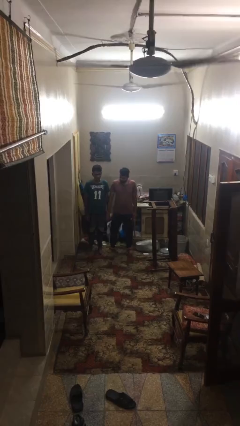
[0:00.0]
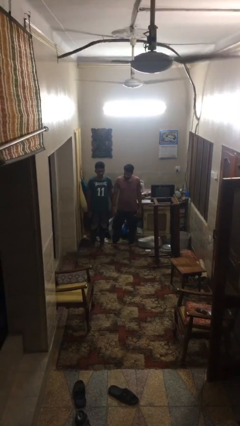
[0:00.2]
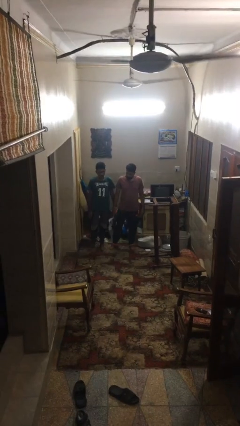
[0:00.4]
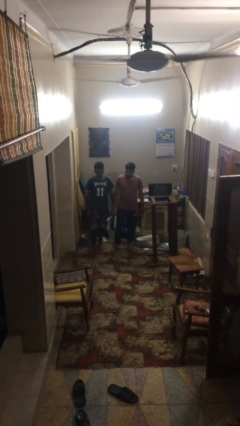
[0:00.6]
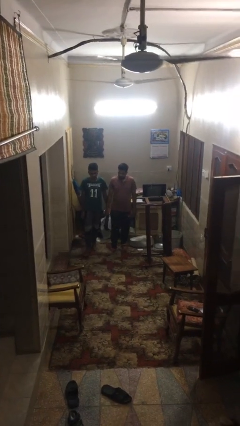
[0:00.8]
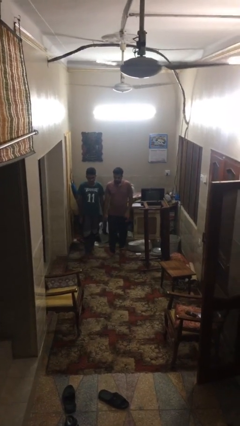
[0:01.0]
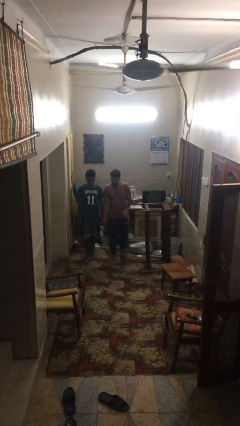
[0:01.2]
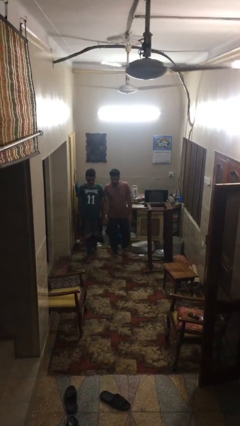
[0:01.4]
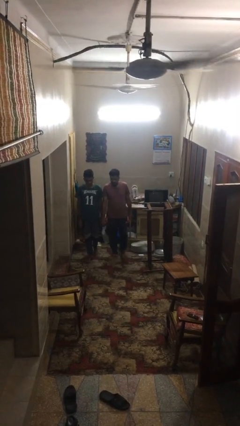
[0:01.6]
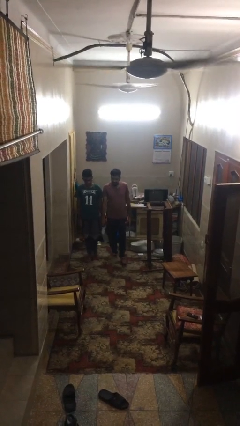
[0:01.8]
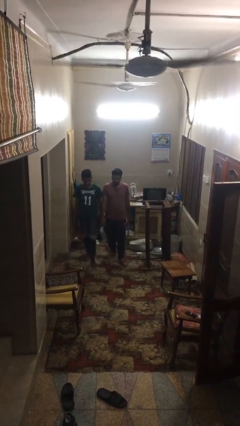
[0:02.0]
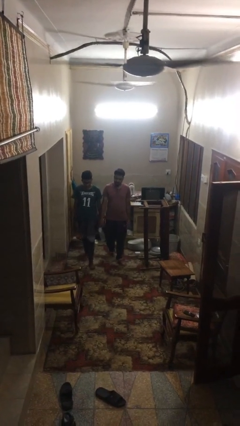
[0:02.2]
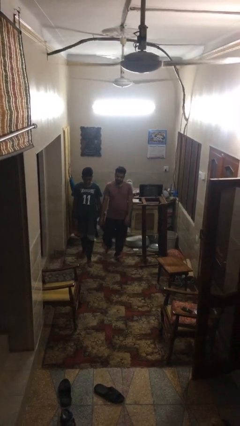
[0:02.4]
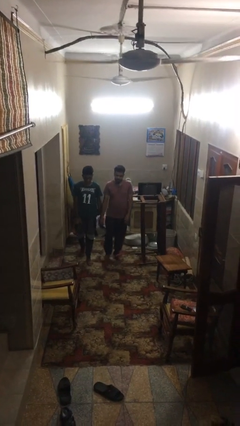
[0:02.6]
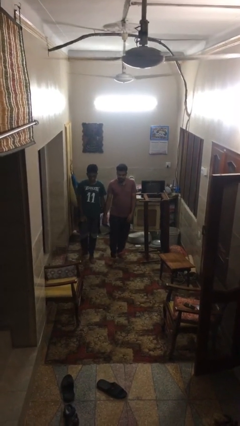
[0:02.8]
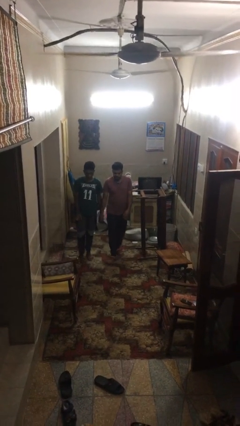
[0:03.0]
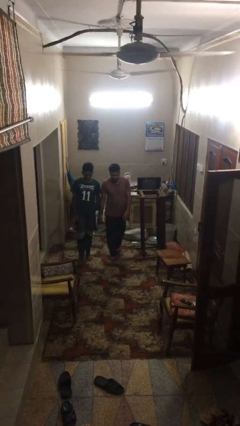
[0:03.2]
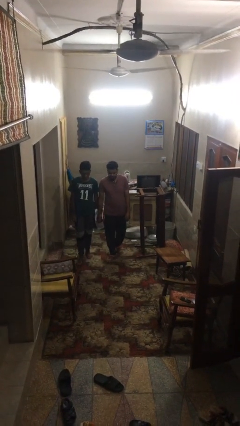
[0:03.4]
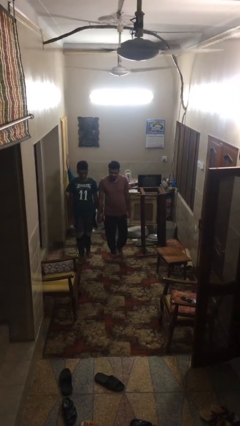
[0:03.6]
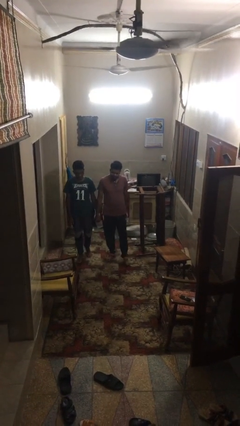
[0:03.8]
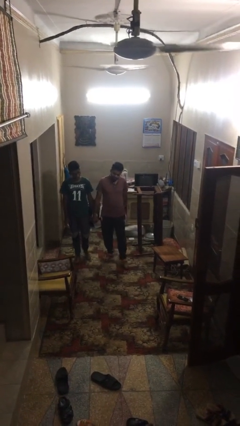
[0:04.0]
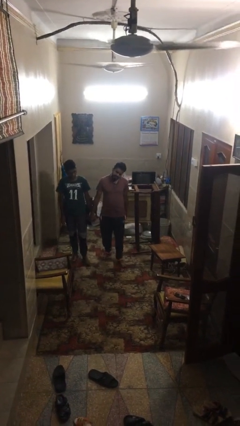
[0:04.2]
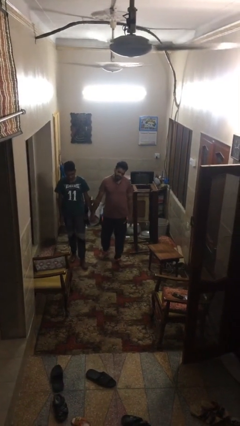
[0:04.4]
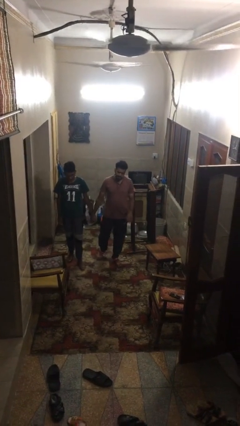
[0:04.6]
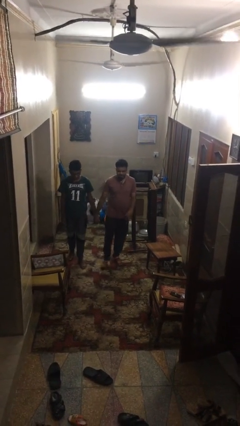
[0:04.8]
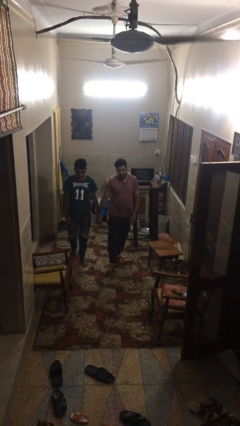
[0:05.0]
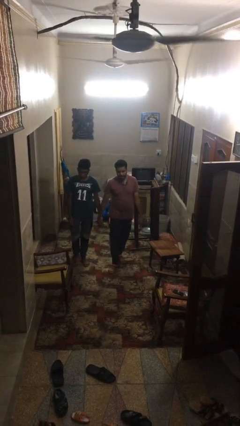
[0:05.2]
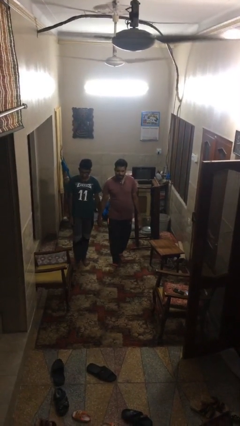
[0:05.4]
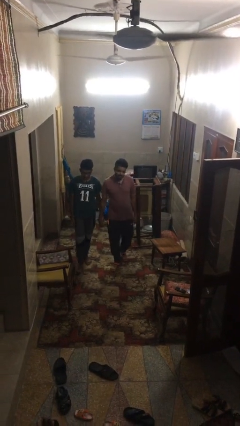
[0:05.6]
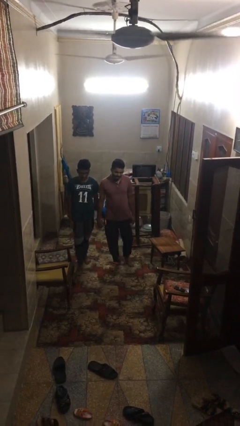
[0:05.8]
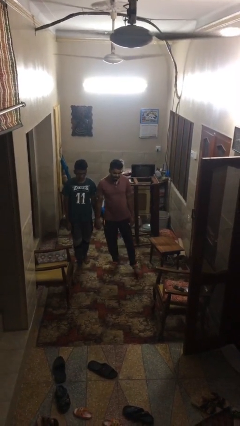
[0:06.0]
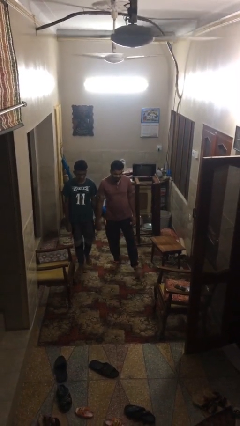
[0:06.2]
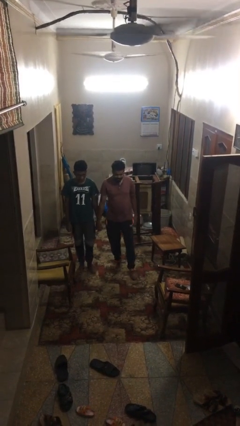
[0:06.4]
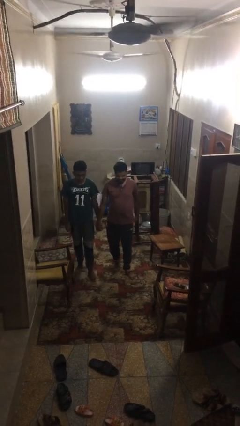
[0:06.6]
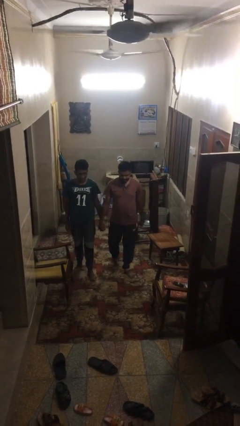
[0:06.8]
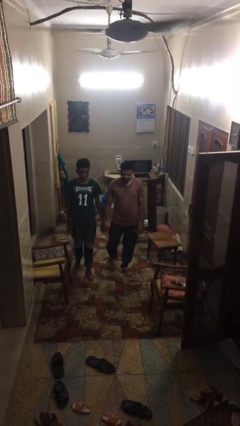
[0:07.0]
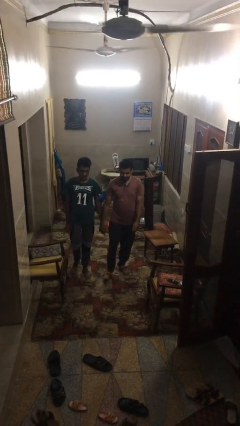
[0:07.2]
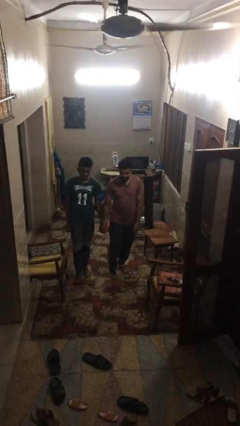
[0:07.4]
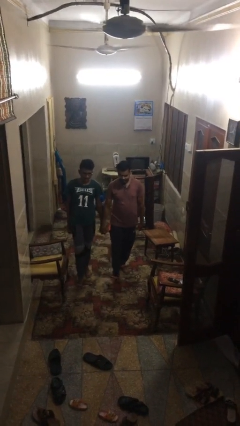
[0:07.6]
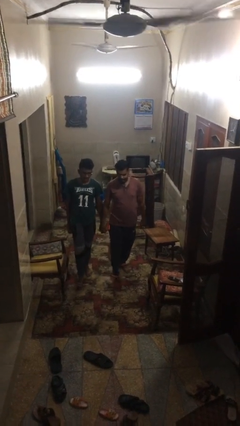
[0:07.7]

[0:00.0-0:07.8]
person transfers object to person

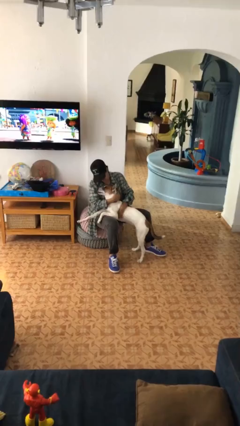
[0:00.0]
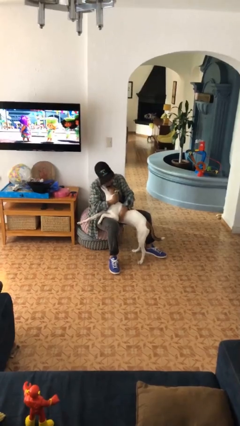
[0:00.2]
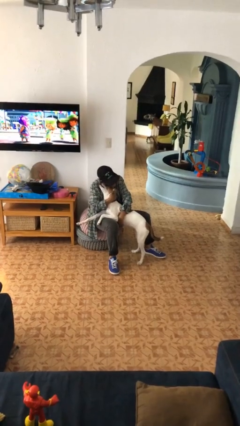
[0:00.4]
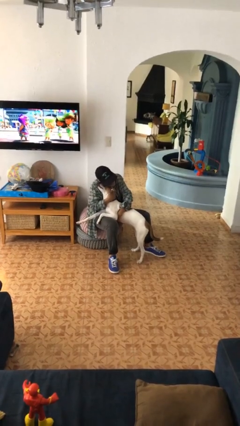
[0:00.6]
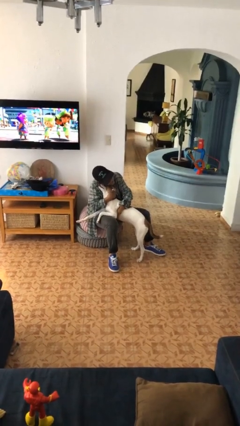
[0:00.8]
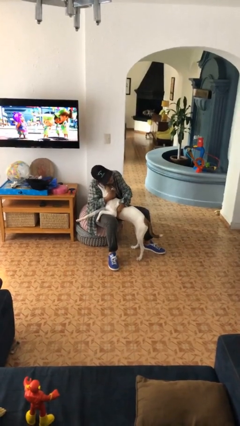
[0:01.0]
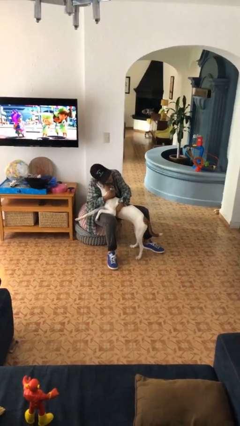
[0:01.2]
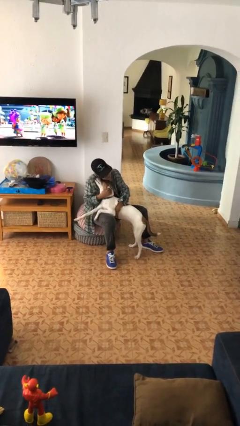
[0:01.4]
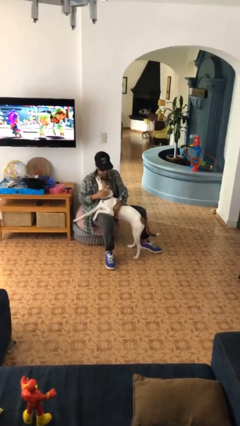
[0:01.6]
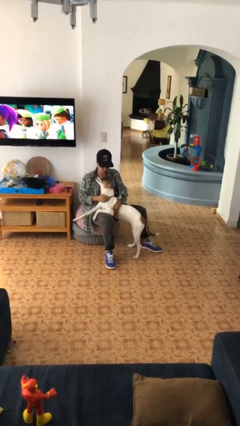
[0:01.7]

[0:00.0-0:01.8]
person hugs dog

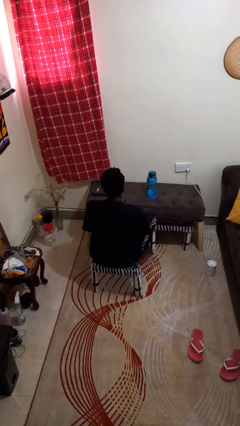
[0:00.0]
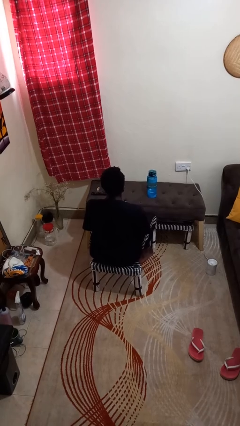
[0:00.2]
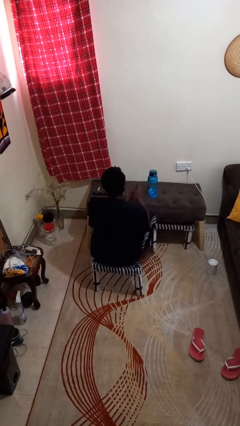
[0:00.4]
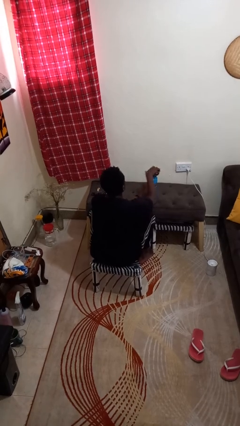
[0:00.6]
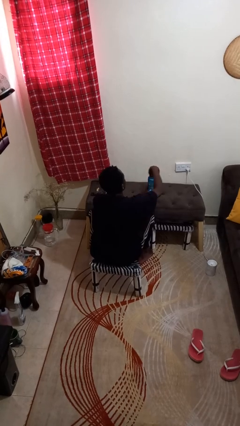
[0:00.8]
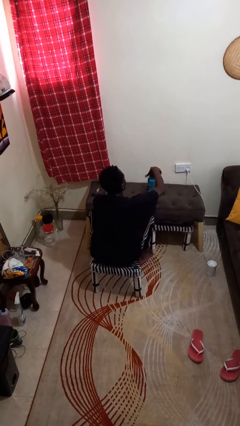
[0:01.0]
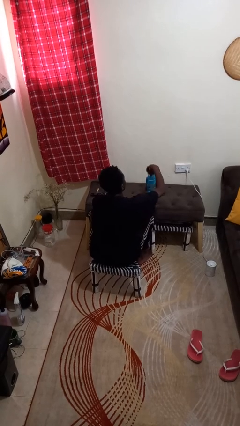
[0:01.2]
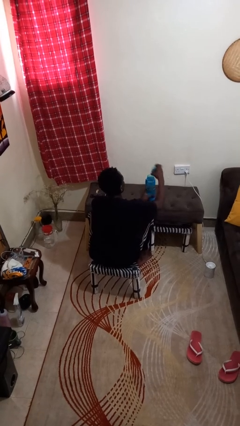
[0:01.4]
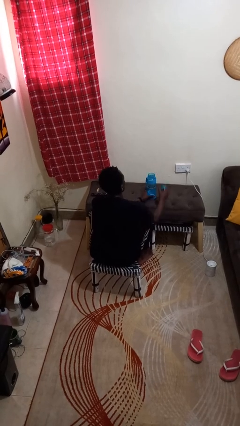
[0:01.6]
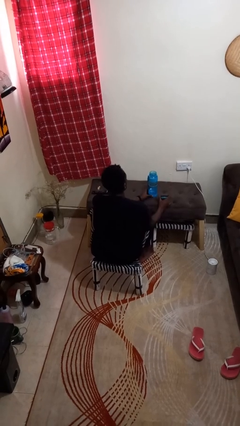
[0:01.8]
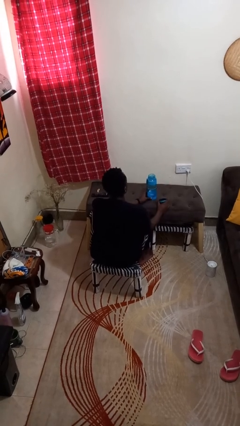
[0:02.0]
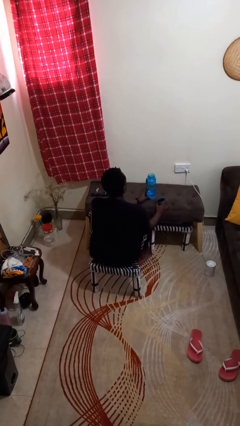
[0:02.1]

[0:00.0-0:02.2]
person opens jar

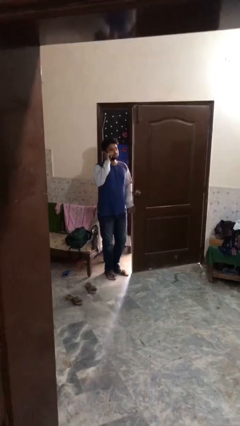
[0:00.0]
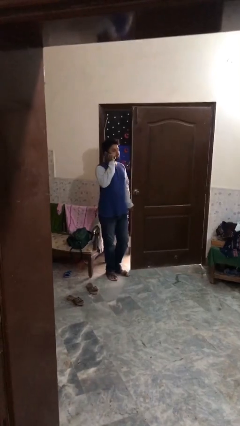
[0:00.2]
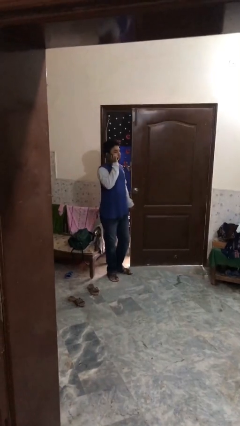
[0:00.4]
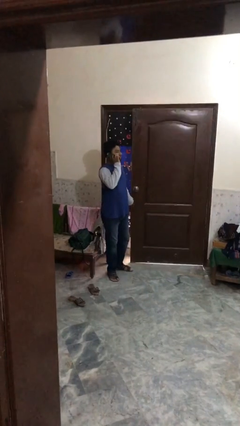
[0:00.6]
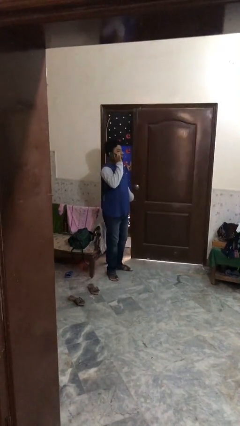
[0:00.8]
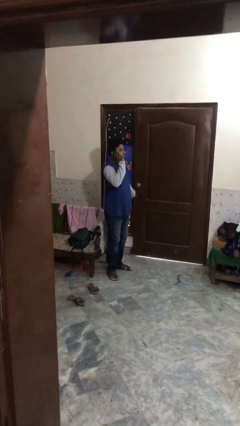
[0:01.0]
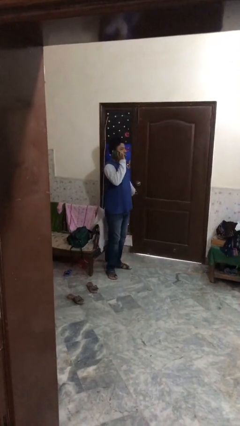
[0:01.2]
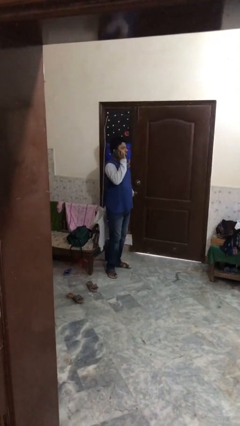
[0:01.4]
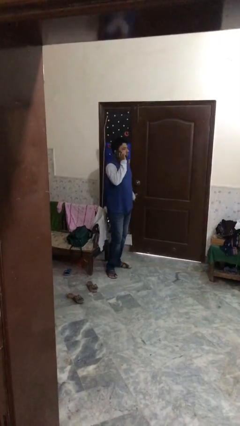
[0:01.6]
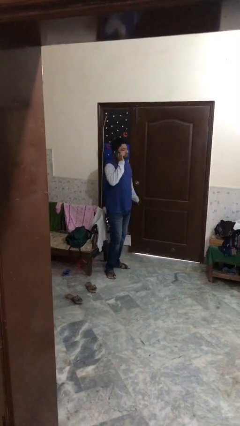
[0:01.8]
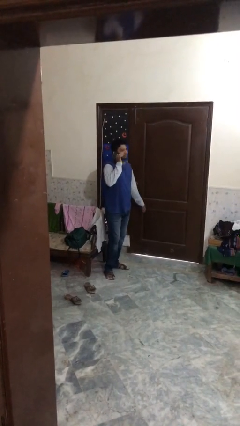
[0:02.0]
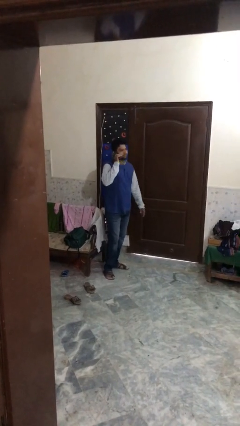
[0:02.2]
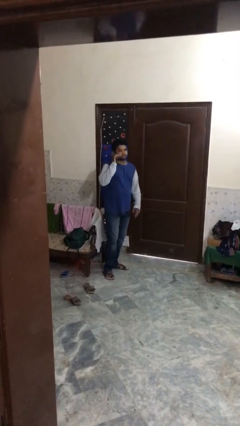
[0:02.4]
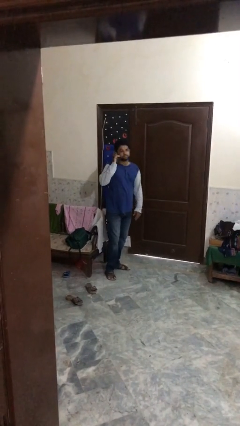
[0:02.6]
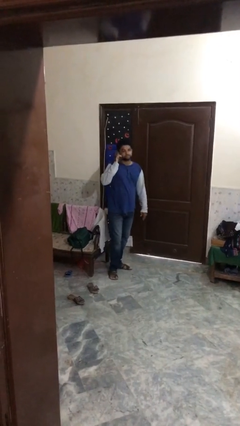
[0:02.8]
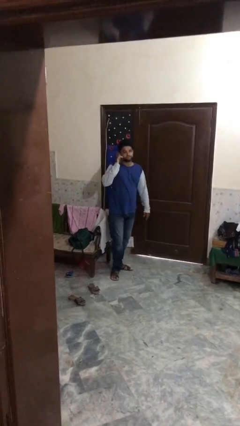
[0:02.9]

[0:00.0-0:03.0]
person closes facility door

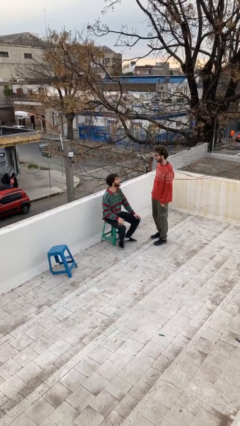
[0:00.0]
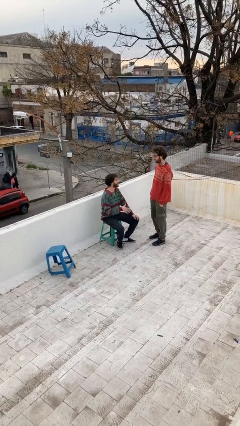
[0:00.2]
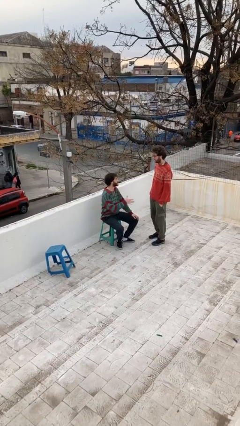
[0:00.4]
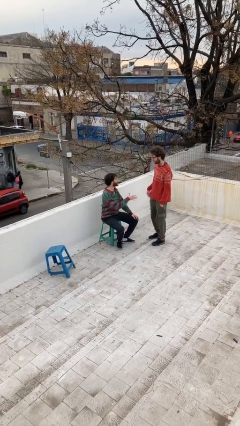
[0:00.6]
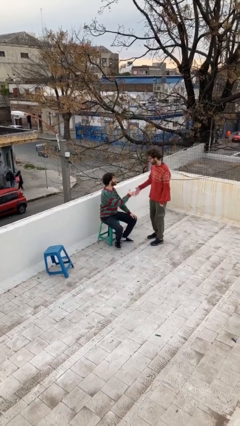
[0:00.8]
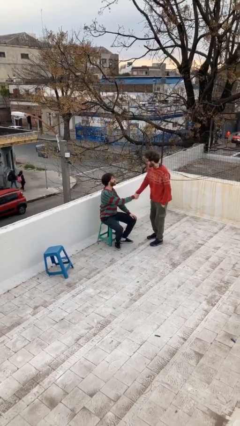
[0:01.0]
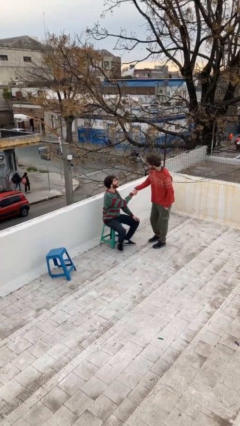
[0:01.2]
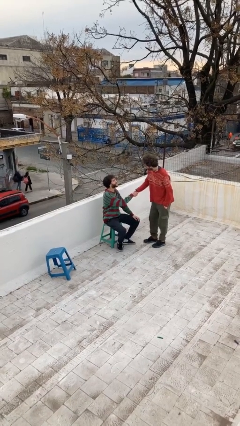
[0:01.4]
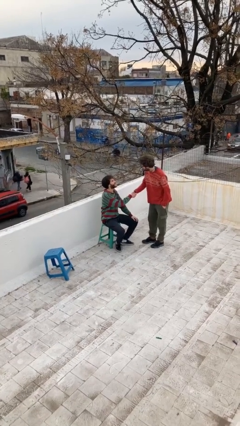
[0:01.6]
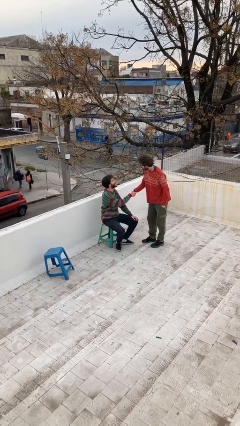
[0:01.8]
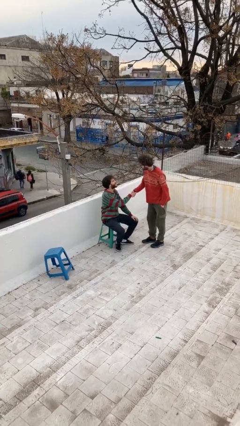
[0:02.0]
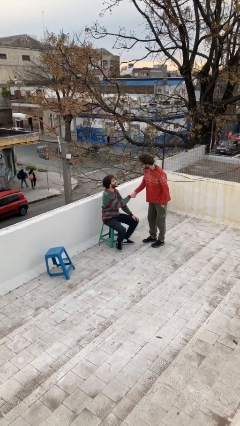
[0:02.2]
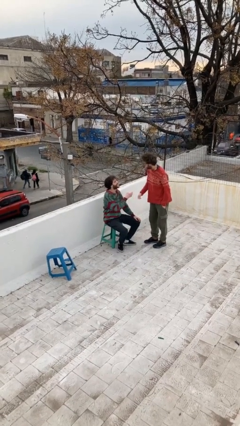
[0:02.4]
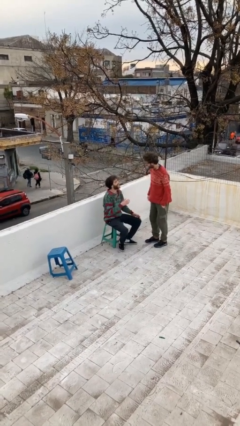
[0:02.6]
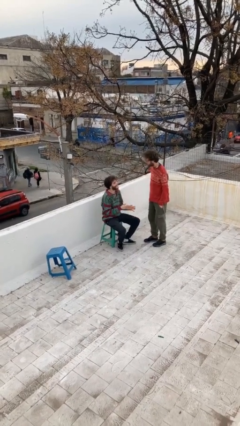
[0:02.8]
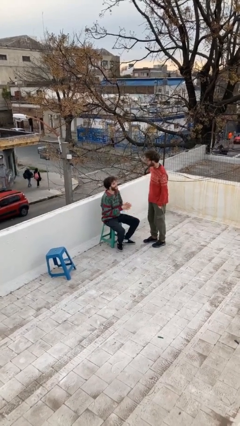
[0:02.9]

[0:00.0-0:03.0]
person shakes hand

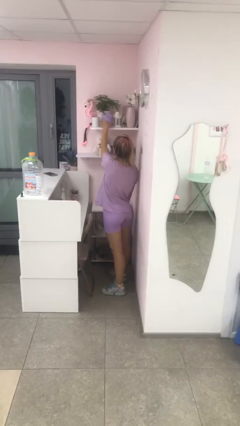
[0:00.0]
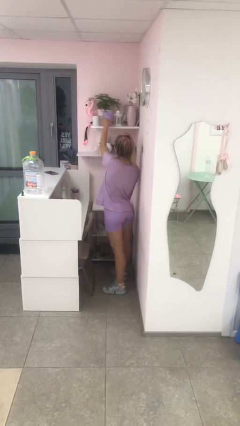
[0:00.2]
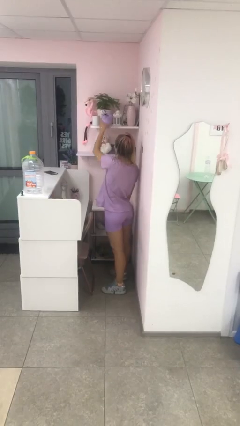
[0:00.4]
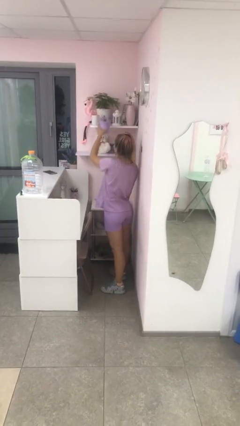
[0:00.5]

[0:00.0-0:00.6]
person picks up object from cabinet
